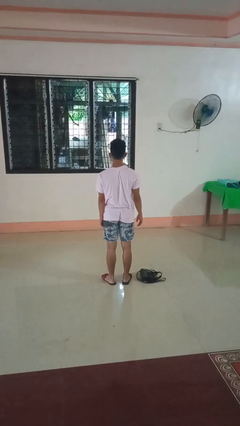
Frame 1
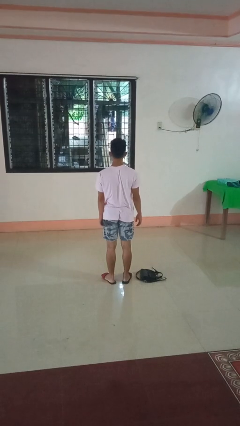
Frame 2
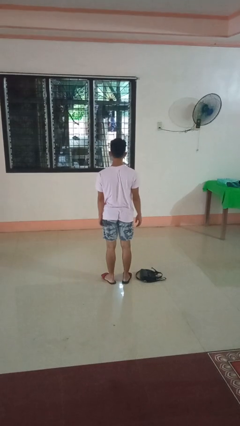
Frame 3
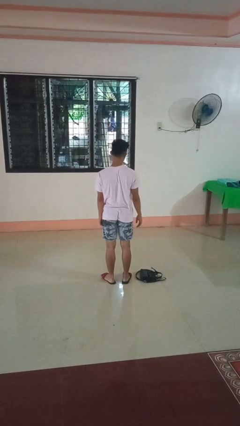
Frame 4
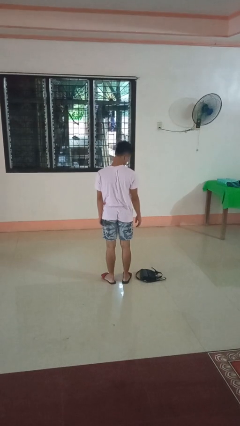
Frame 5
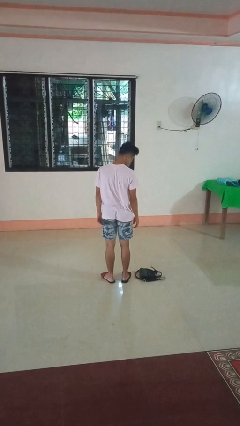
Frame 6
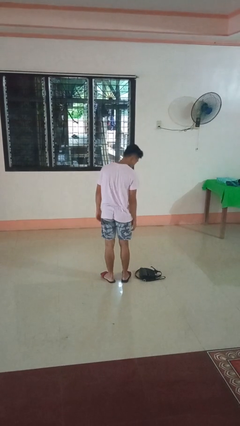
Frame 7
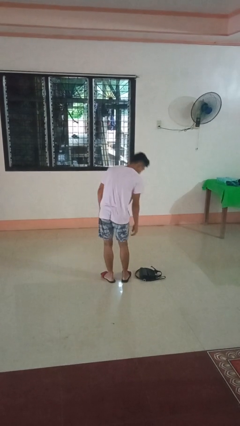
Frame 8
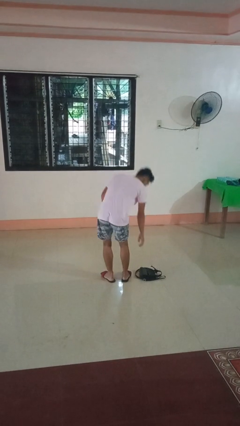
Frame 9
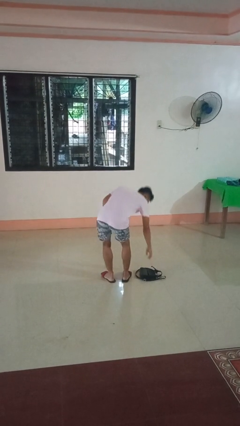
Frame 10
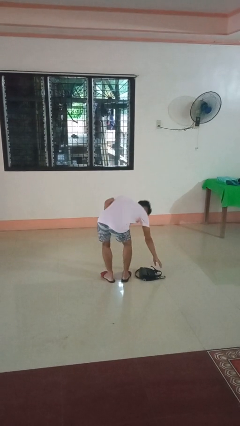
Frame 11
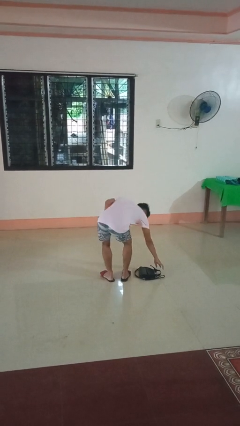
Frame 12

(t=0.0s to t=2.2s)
person drops object

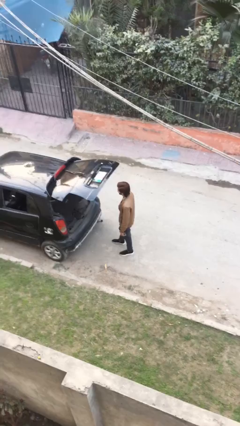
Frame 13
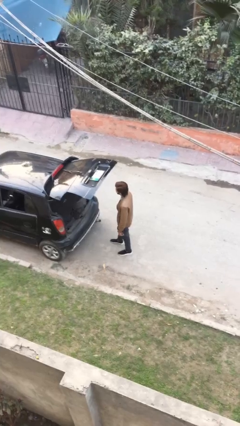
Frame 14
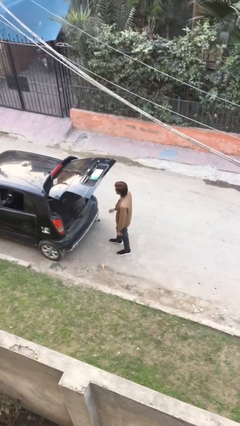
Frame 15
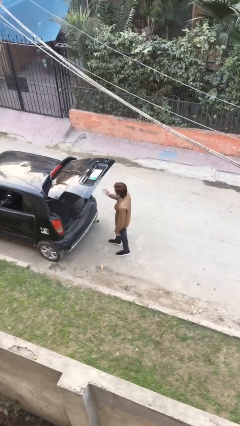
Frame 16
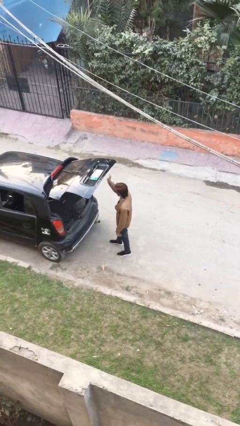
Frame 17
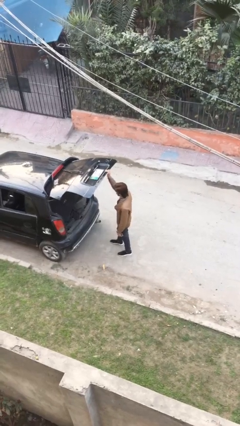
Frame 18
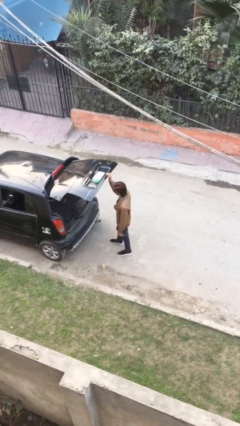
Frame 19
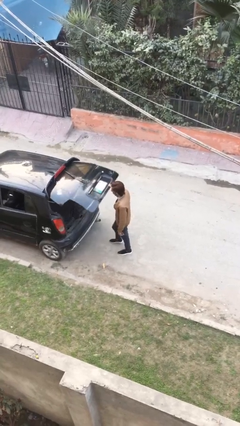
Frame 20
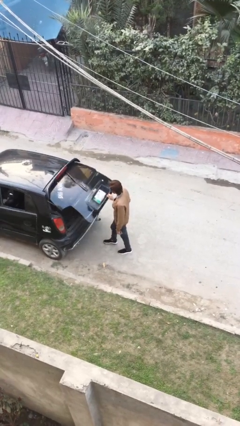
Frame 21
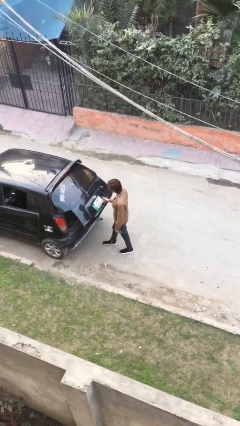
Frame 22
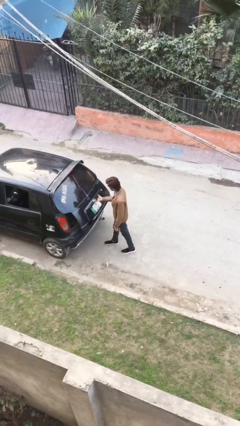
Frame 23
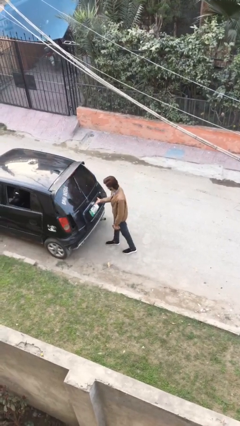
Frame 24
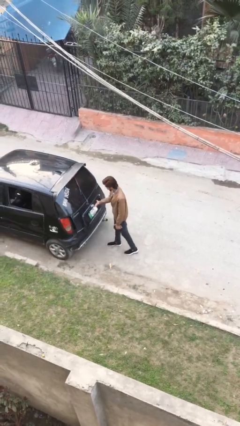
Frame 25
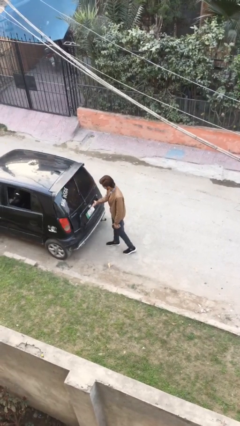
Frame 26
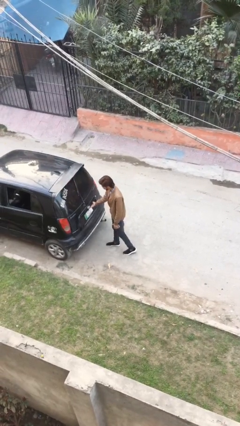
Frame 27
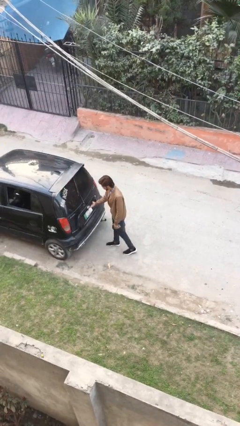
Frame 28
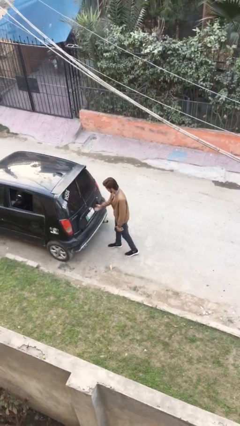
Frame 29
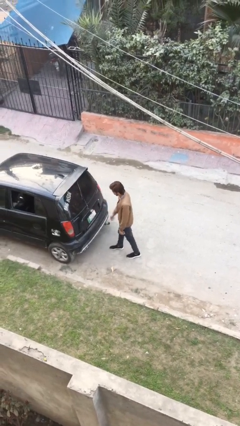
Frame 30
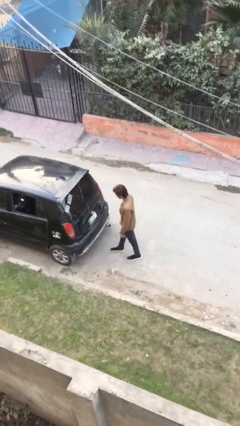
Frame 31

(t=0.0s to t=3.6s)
person closes car trunk

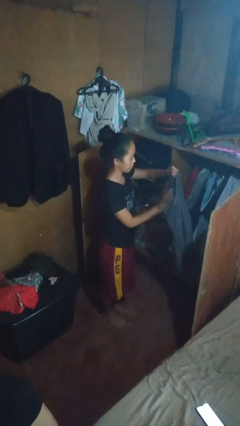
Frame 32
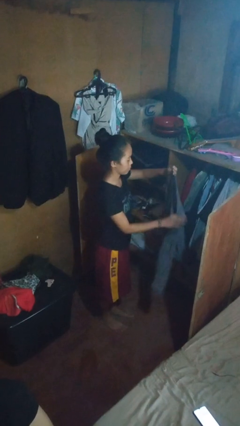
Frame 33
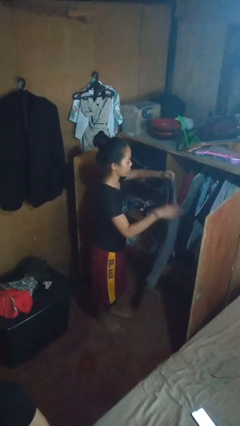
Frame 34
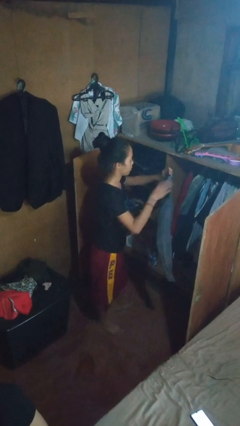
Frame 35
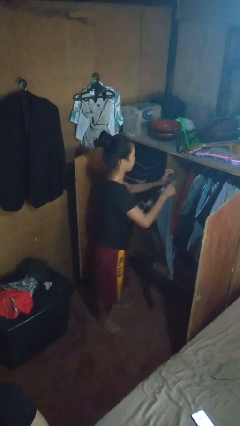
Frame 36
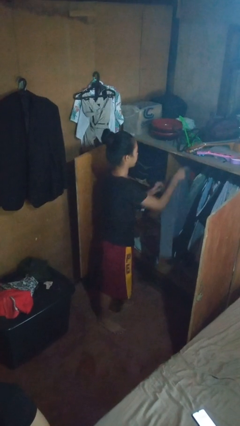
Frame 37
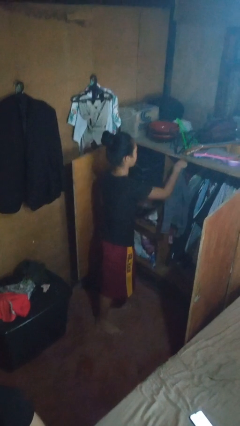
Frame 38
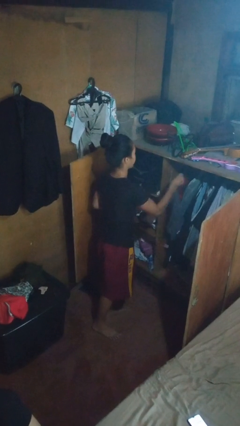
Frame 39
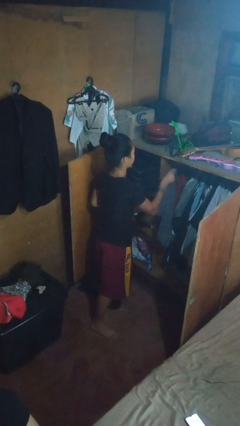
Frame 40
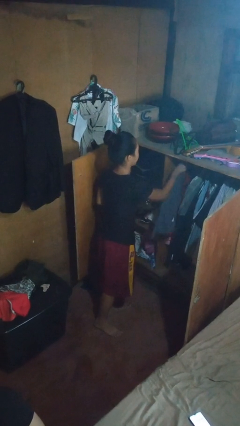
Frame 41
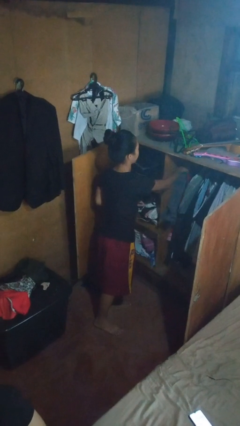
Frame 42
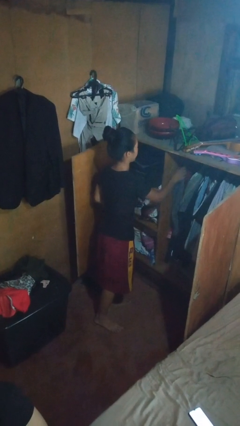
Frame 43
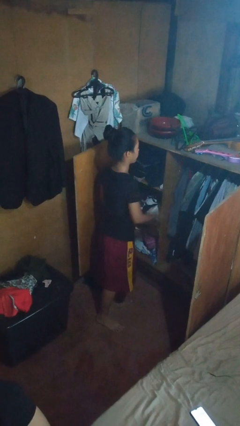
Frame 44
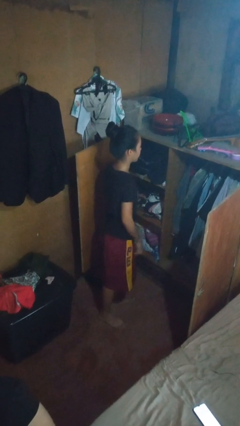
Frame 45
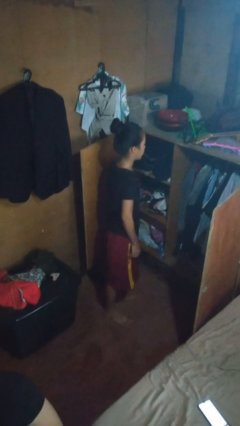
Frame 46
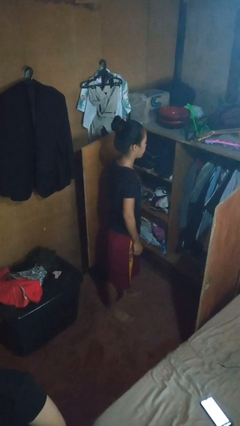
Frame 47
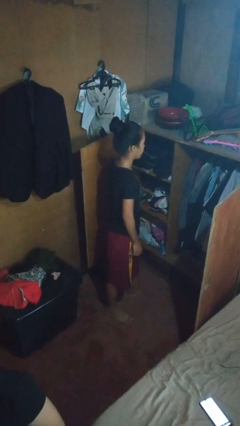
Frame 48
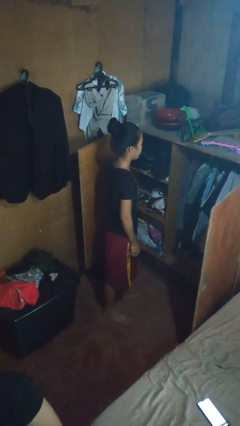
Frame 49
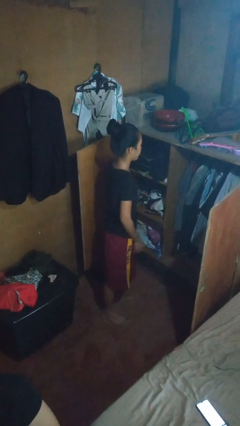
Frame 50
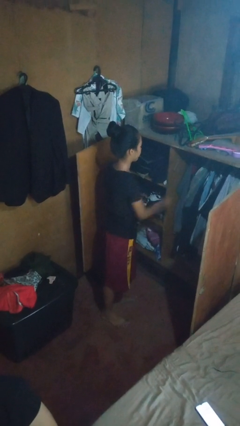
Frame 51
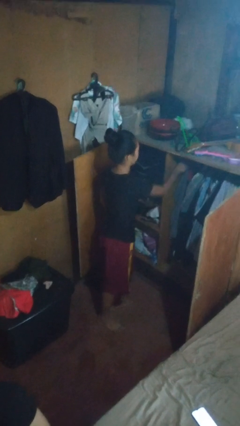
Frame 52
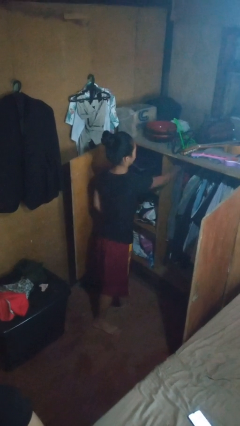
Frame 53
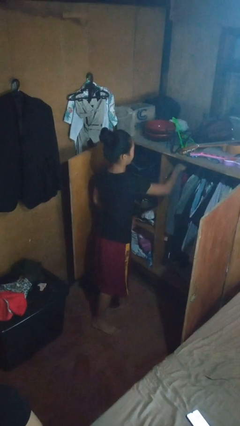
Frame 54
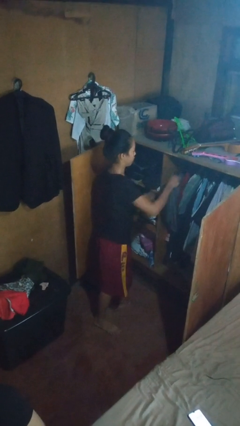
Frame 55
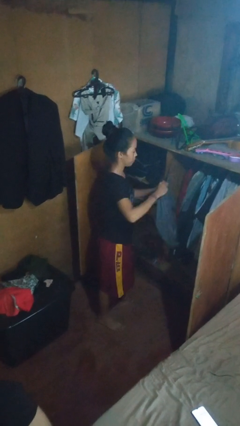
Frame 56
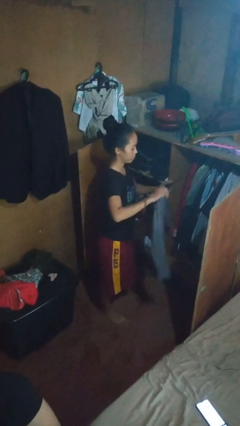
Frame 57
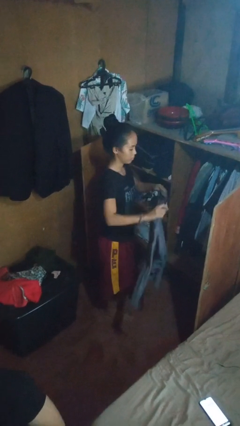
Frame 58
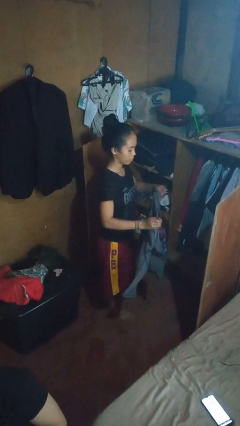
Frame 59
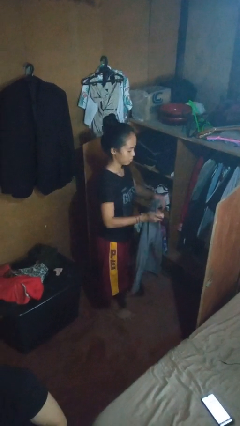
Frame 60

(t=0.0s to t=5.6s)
person puts clothes into closet

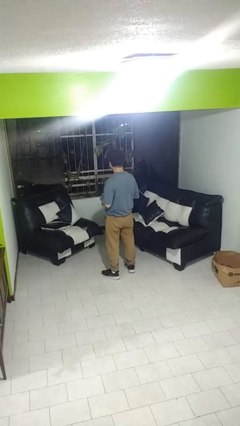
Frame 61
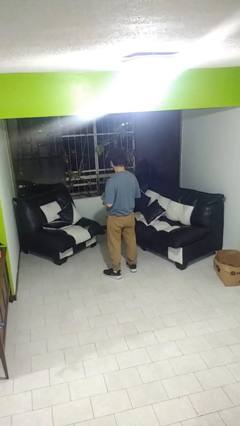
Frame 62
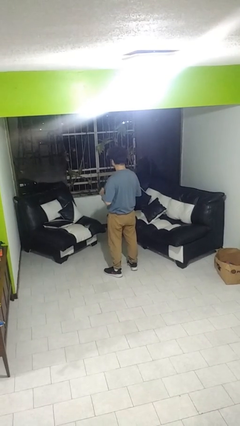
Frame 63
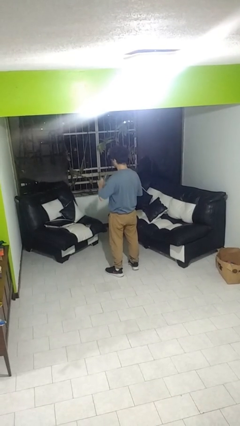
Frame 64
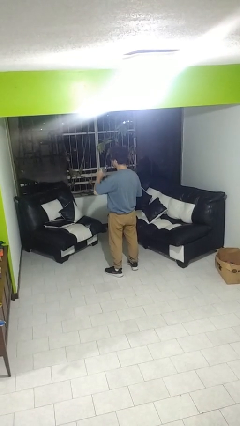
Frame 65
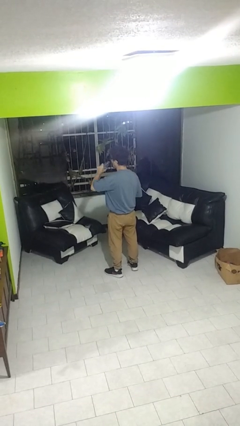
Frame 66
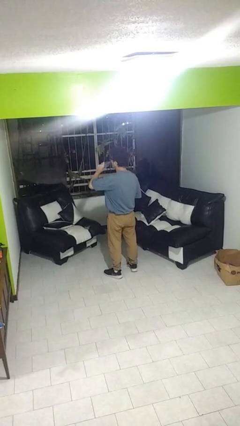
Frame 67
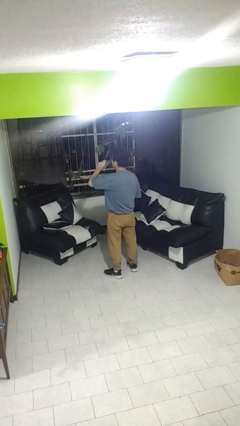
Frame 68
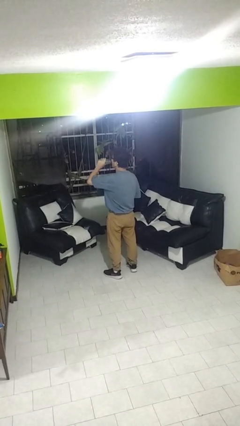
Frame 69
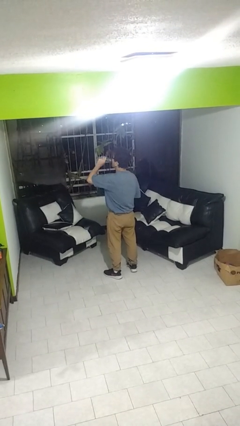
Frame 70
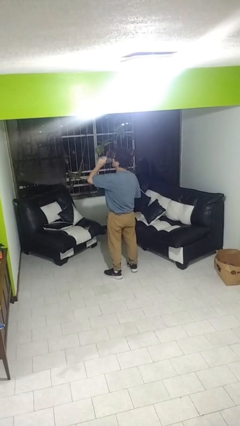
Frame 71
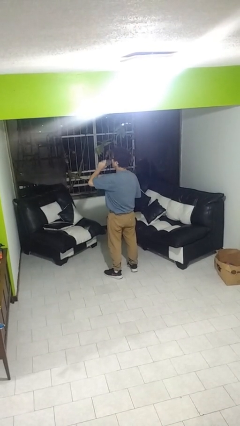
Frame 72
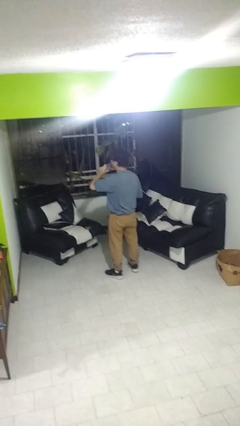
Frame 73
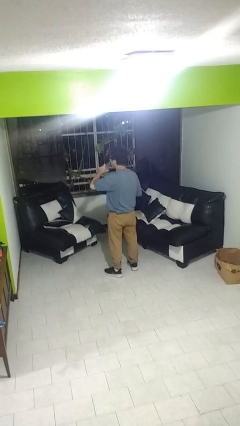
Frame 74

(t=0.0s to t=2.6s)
person drinks from bottle

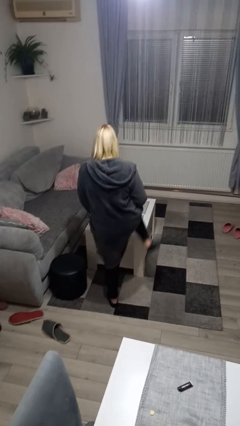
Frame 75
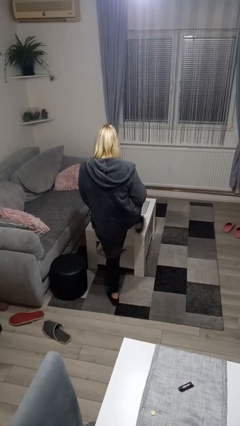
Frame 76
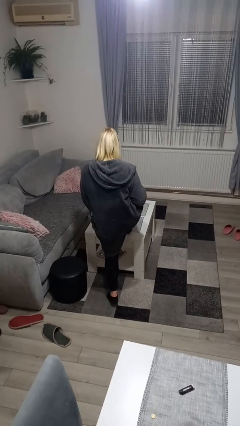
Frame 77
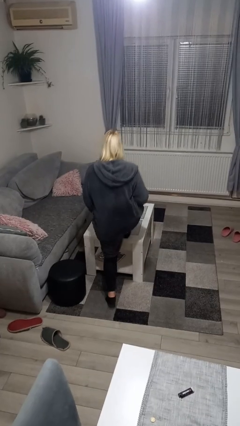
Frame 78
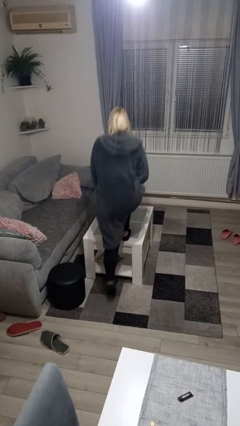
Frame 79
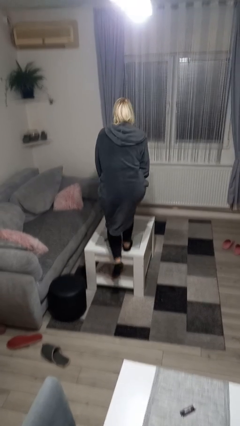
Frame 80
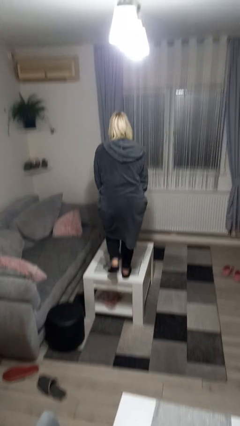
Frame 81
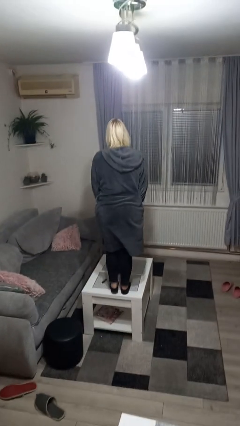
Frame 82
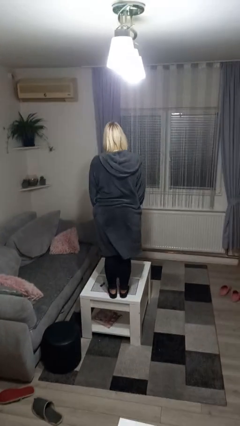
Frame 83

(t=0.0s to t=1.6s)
person climbs on table

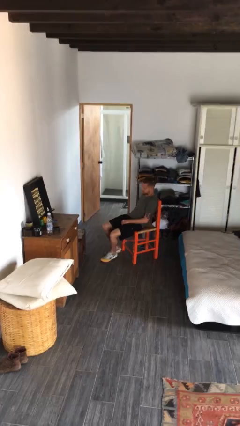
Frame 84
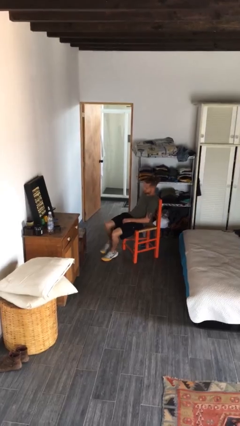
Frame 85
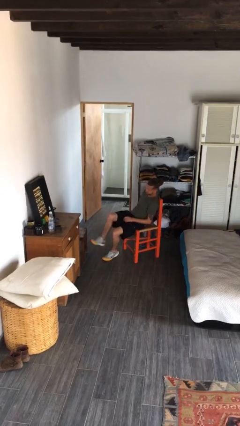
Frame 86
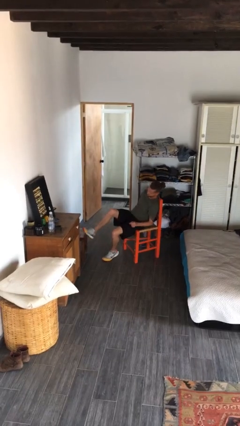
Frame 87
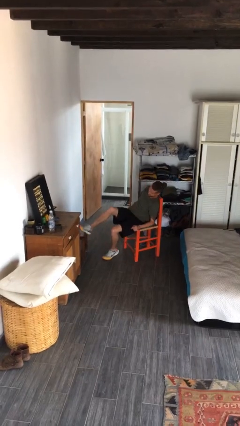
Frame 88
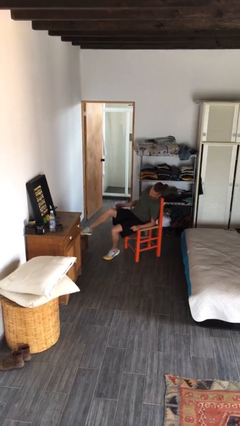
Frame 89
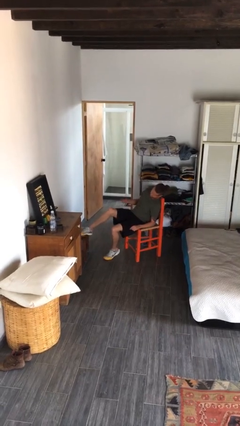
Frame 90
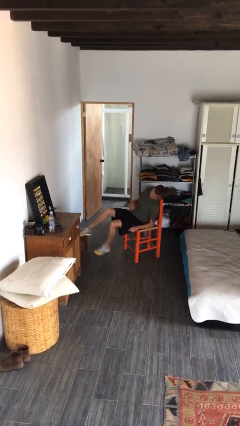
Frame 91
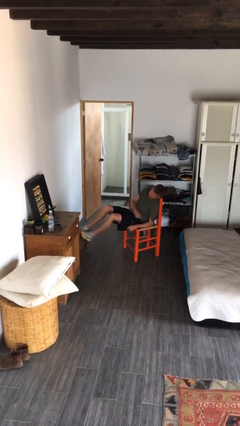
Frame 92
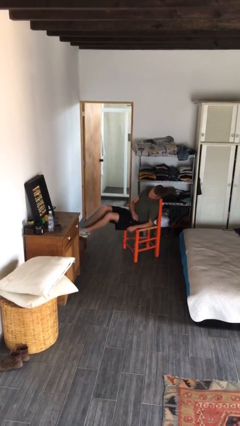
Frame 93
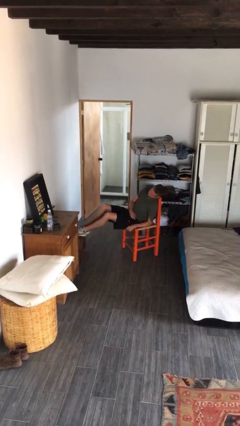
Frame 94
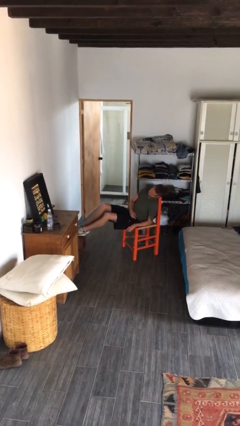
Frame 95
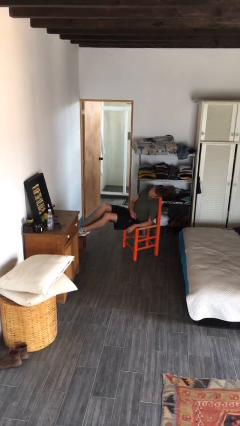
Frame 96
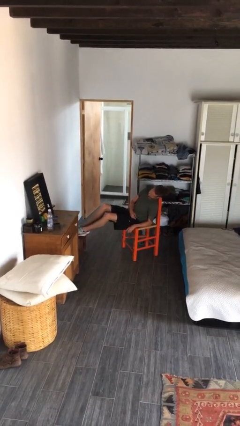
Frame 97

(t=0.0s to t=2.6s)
person puts feet up
